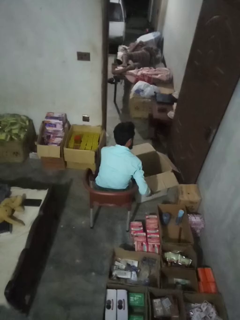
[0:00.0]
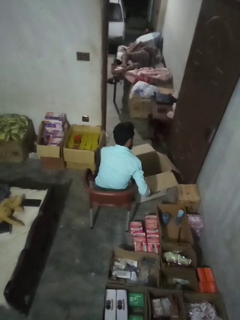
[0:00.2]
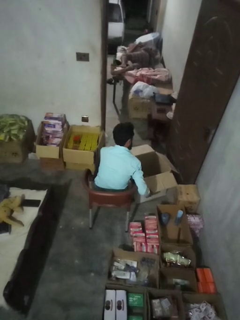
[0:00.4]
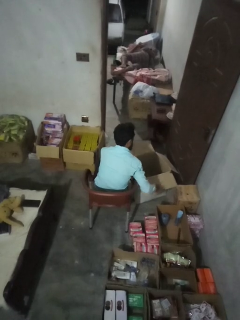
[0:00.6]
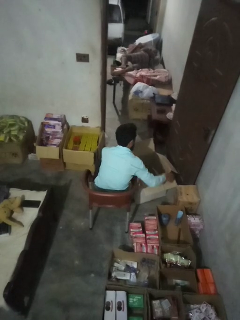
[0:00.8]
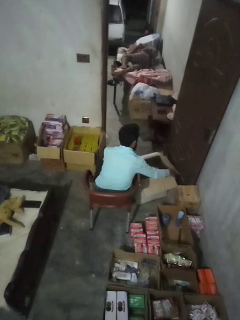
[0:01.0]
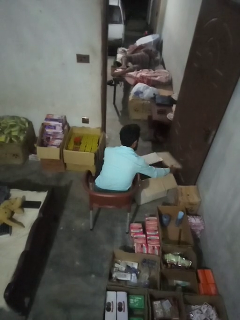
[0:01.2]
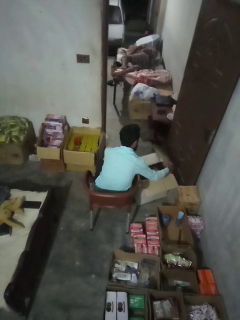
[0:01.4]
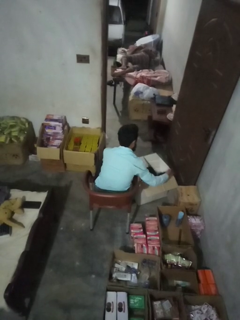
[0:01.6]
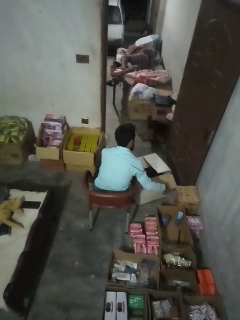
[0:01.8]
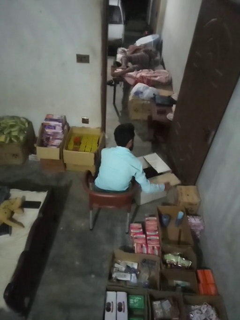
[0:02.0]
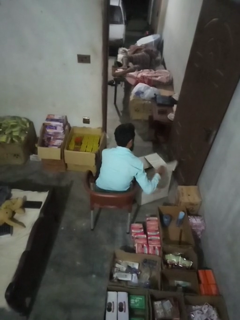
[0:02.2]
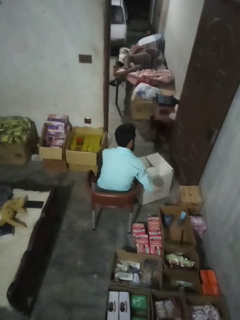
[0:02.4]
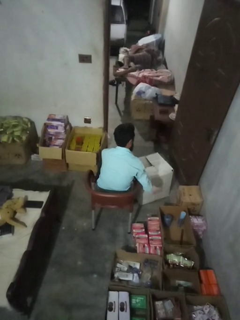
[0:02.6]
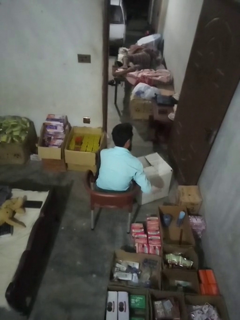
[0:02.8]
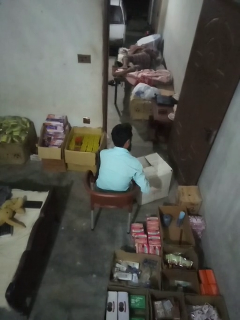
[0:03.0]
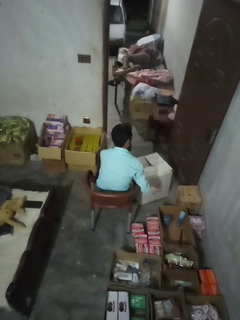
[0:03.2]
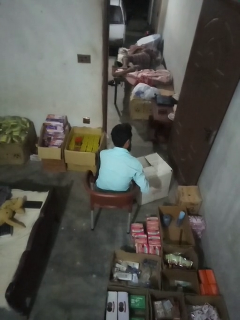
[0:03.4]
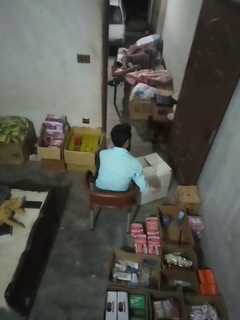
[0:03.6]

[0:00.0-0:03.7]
person closes box

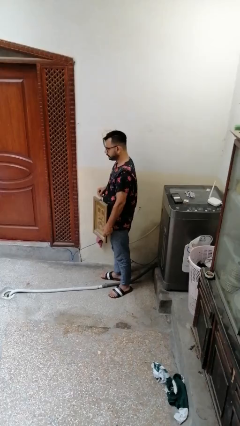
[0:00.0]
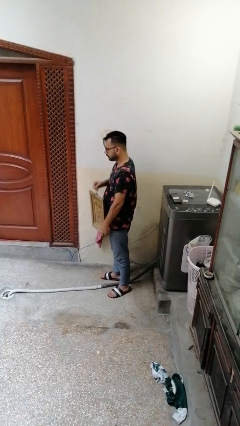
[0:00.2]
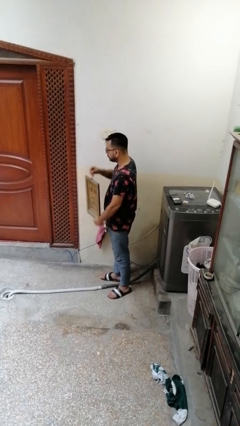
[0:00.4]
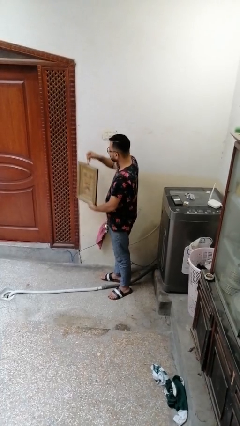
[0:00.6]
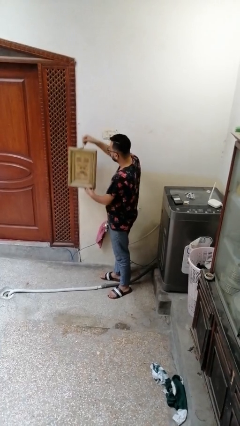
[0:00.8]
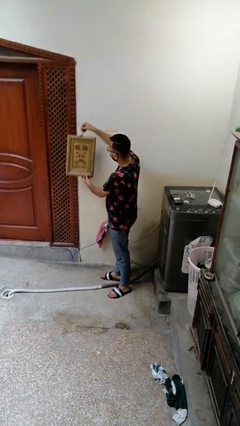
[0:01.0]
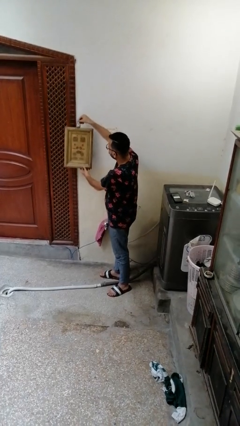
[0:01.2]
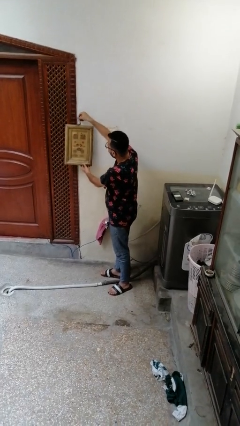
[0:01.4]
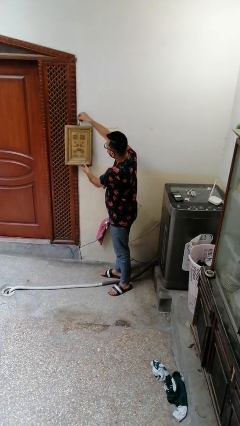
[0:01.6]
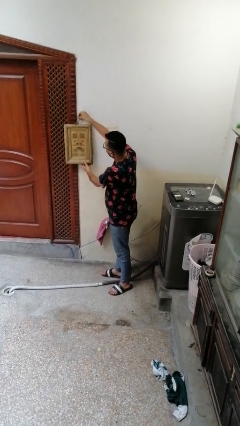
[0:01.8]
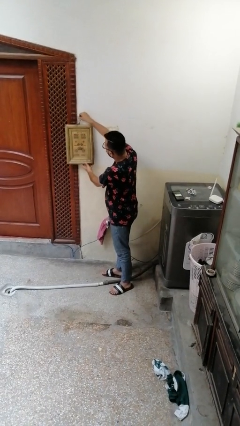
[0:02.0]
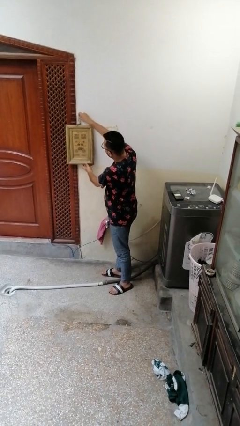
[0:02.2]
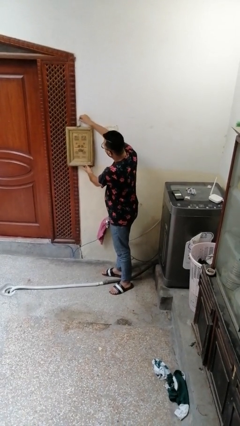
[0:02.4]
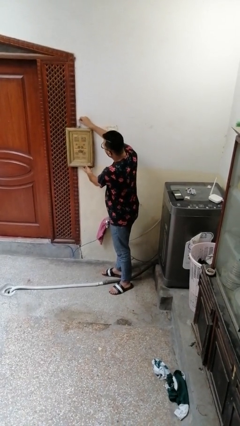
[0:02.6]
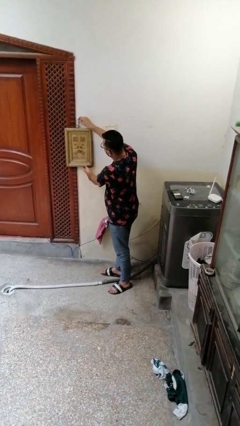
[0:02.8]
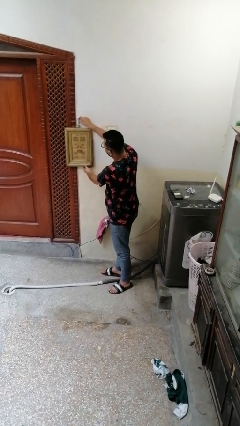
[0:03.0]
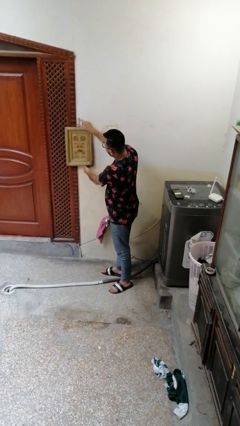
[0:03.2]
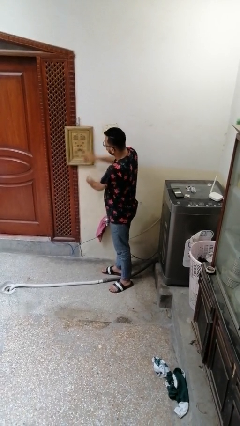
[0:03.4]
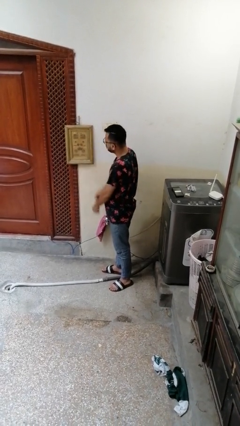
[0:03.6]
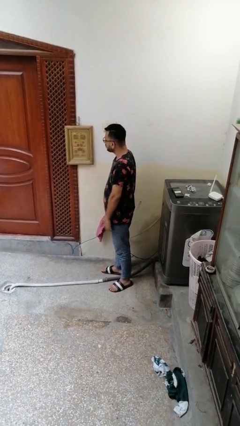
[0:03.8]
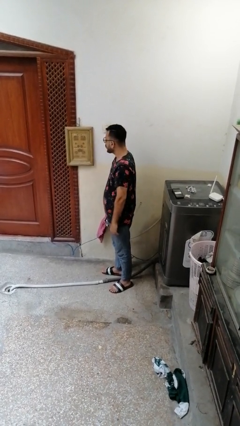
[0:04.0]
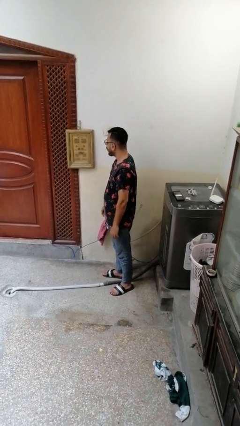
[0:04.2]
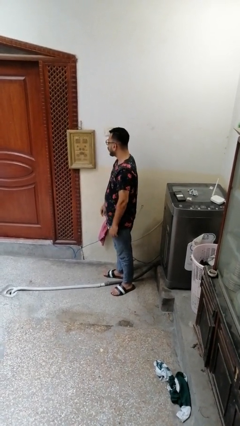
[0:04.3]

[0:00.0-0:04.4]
person puts up picture frame

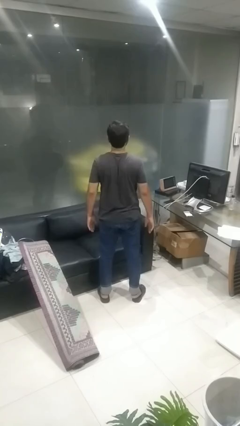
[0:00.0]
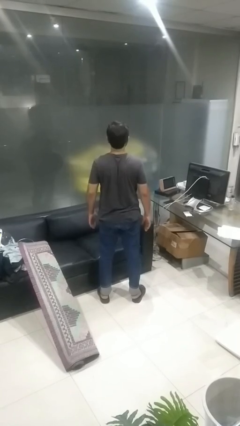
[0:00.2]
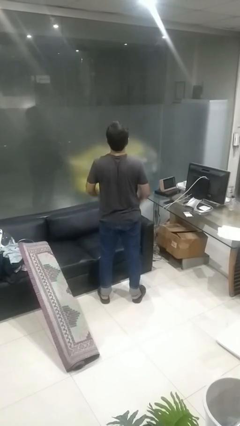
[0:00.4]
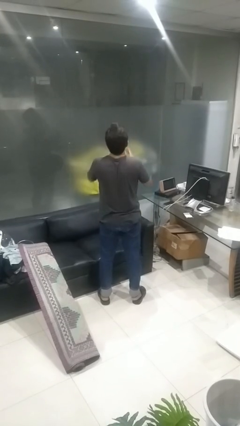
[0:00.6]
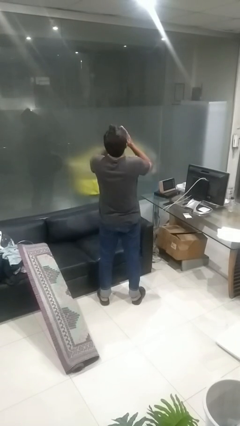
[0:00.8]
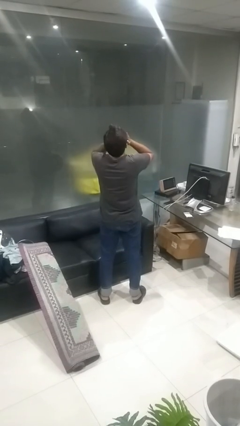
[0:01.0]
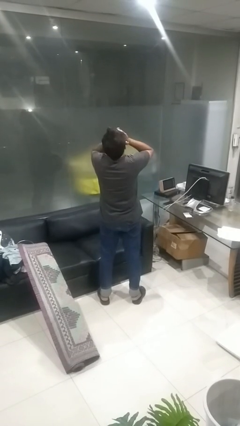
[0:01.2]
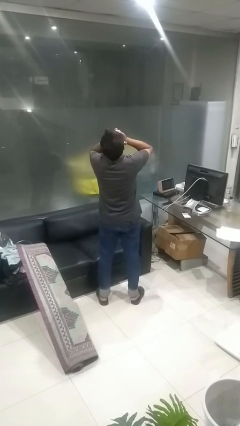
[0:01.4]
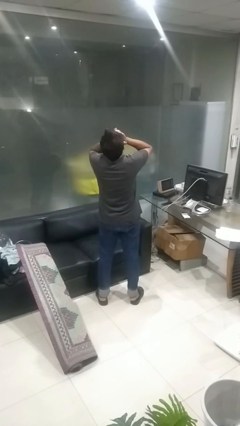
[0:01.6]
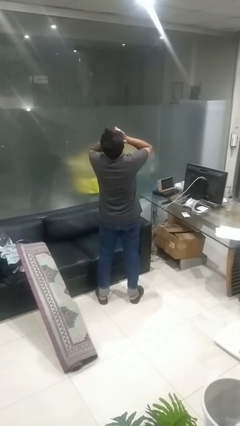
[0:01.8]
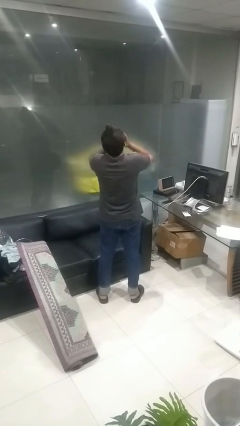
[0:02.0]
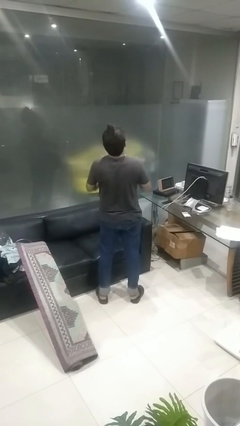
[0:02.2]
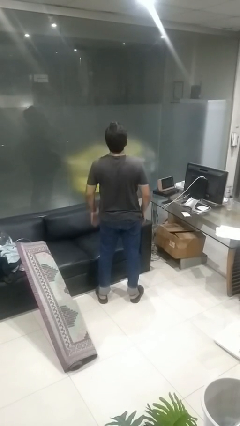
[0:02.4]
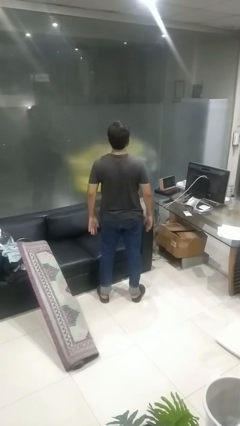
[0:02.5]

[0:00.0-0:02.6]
person covers face with hands

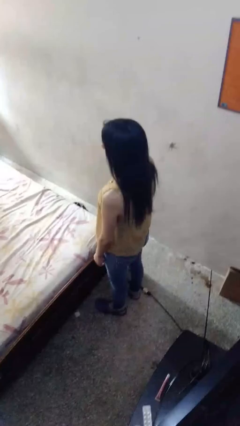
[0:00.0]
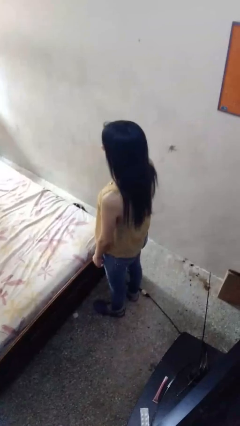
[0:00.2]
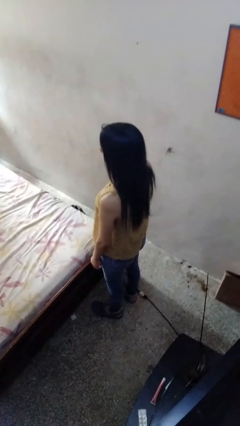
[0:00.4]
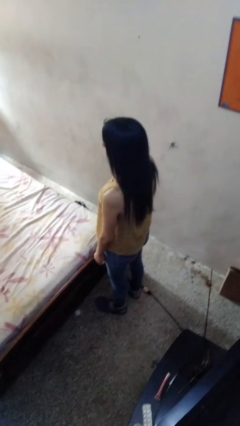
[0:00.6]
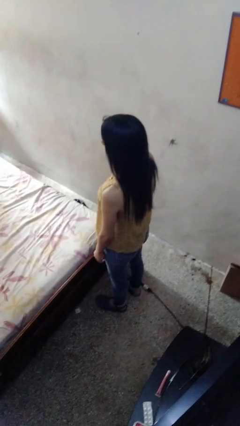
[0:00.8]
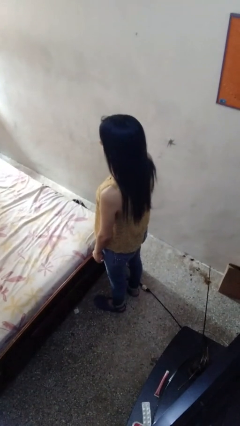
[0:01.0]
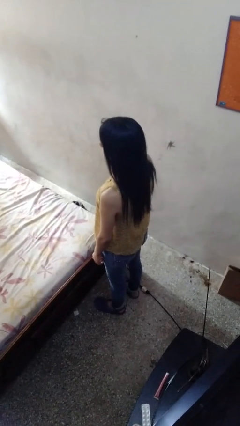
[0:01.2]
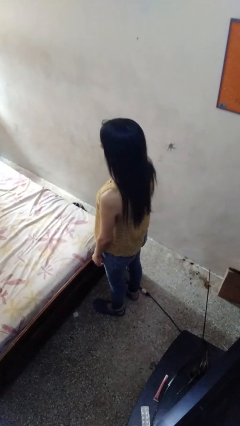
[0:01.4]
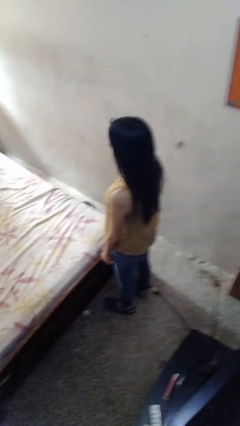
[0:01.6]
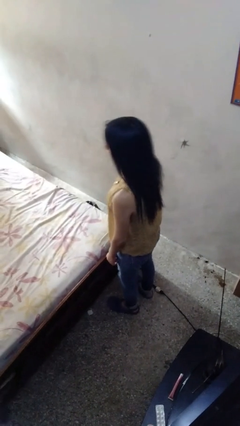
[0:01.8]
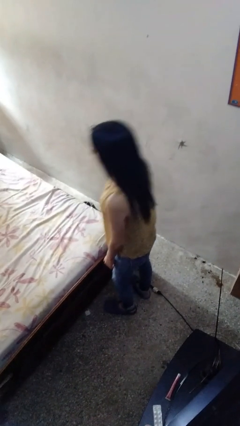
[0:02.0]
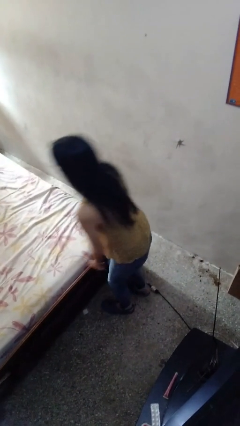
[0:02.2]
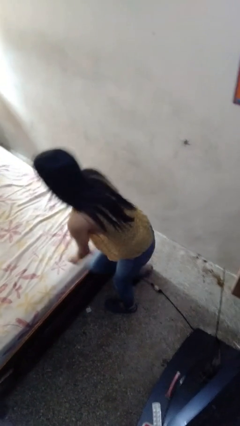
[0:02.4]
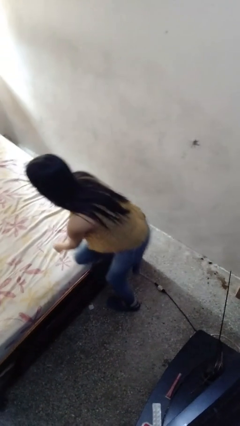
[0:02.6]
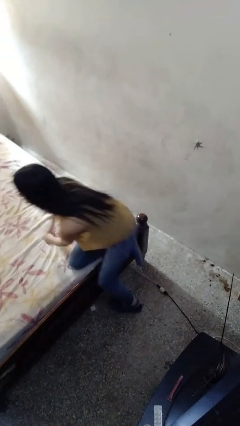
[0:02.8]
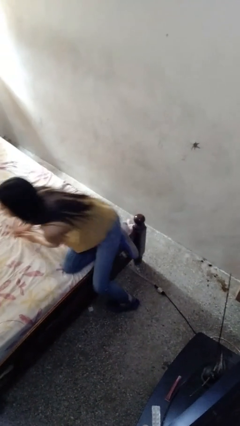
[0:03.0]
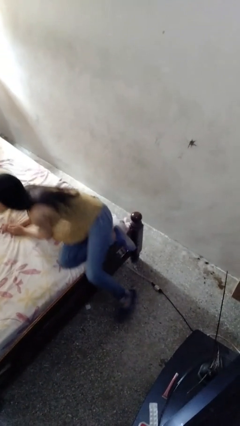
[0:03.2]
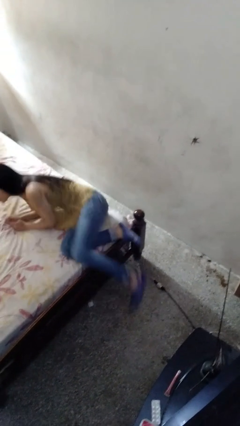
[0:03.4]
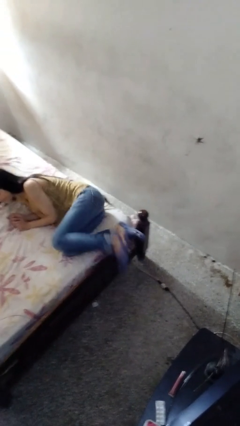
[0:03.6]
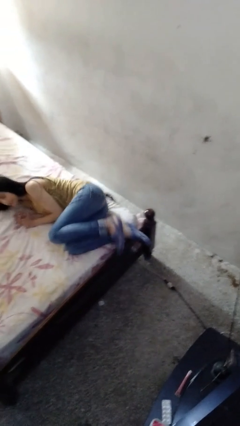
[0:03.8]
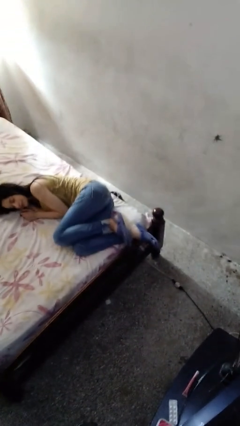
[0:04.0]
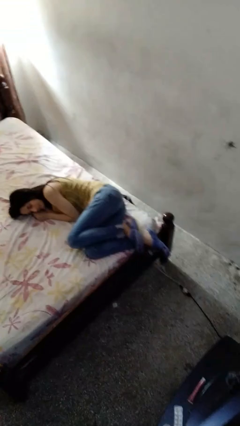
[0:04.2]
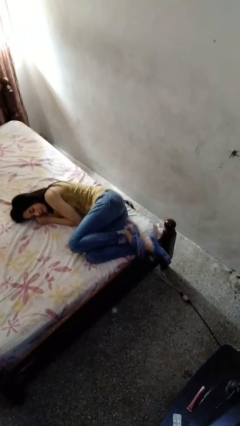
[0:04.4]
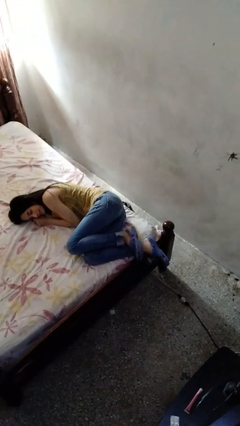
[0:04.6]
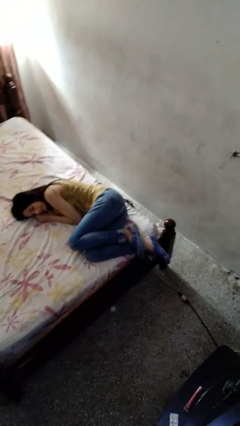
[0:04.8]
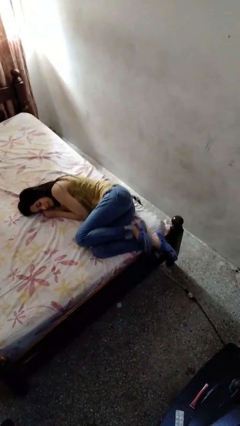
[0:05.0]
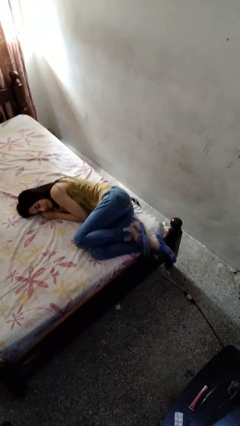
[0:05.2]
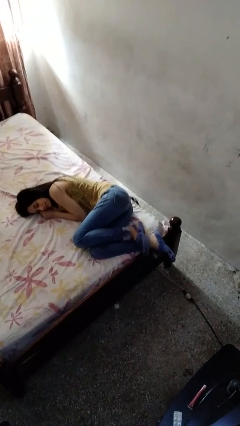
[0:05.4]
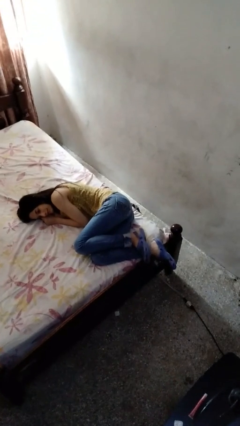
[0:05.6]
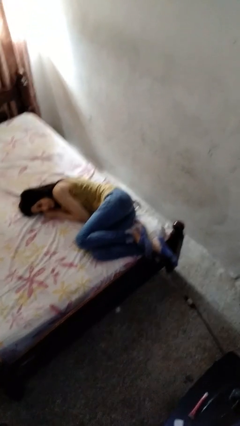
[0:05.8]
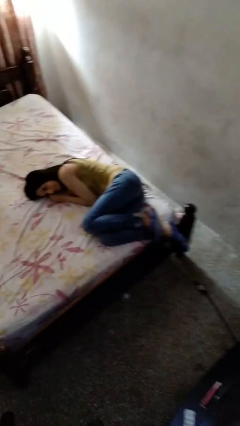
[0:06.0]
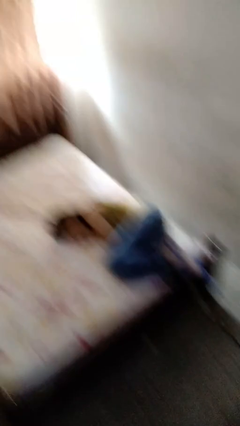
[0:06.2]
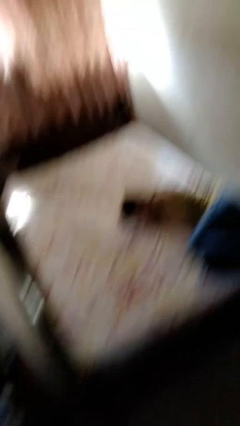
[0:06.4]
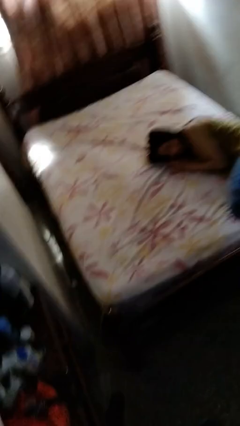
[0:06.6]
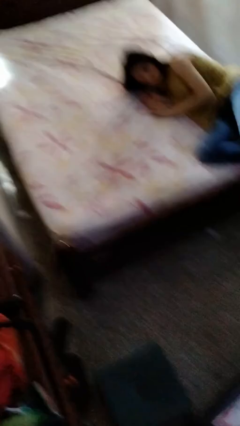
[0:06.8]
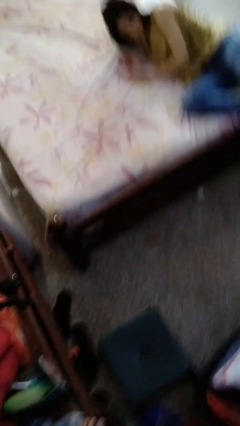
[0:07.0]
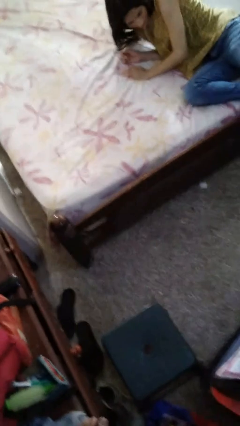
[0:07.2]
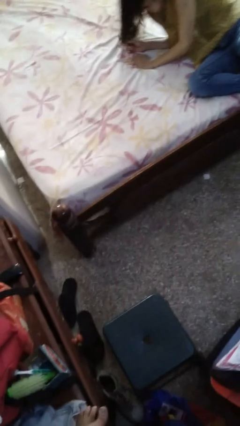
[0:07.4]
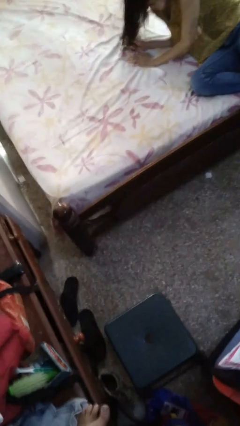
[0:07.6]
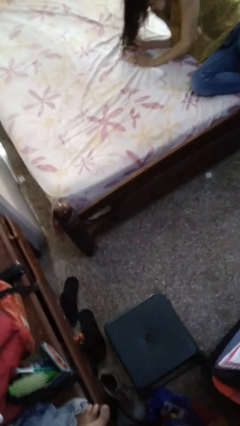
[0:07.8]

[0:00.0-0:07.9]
person lies down on bed

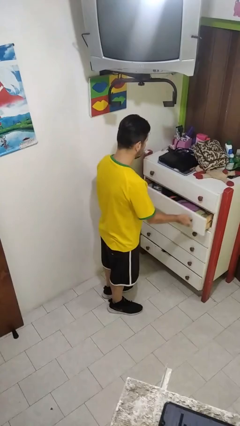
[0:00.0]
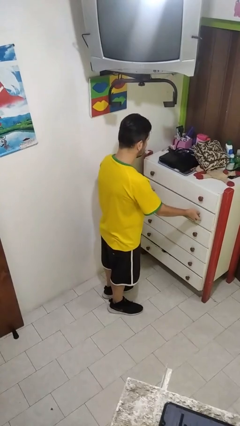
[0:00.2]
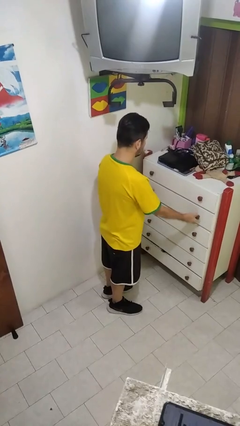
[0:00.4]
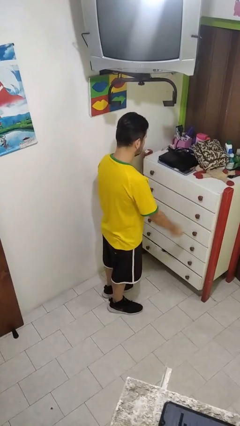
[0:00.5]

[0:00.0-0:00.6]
person closes dresser drawer
